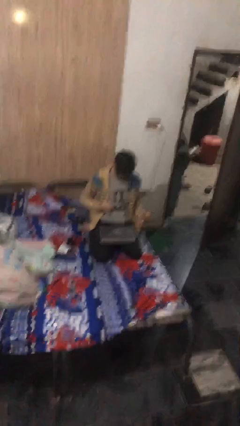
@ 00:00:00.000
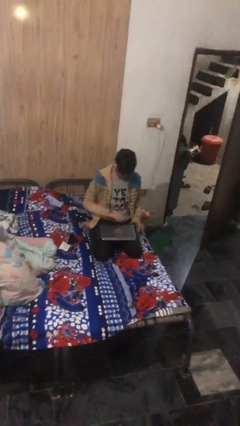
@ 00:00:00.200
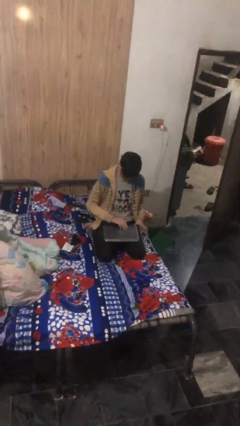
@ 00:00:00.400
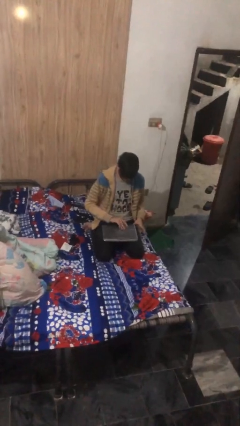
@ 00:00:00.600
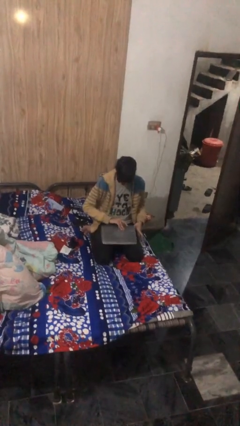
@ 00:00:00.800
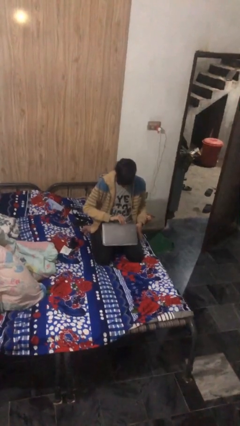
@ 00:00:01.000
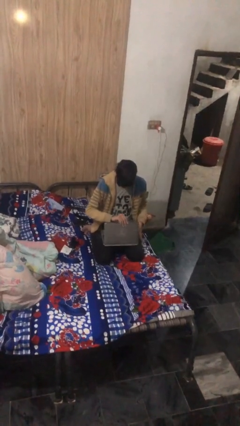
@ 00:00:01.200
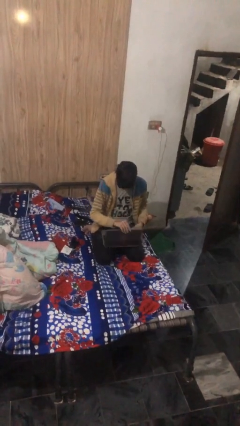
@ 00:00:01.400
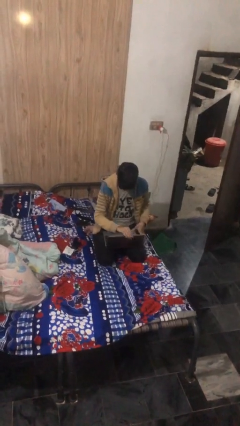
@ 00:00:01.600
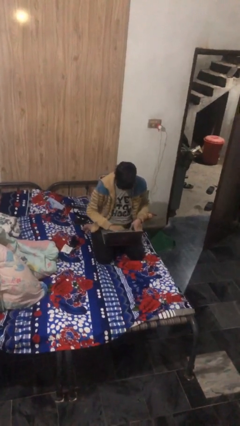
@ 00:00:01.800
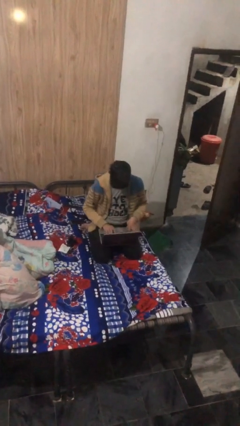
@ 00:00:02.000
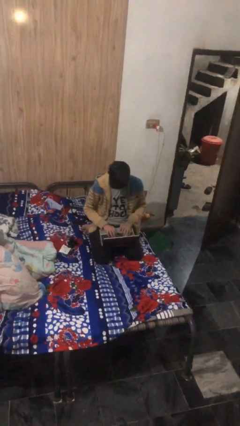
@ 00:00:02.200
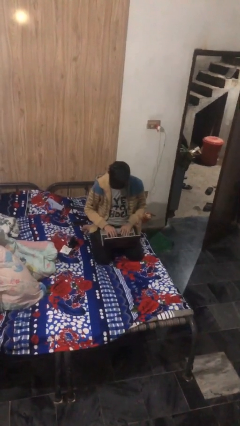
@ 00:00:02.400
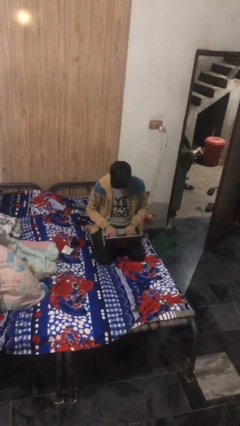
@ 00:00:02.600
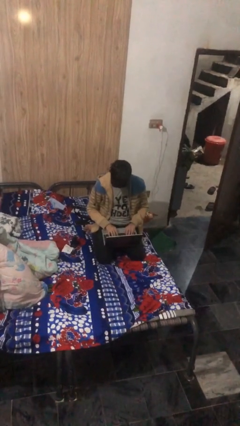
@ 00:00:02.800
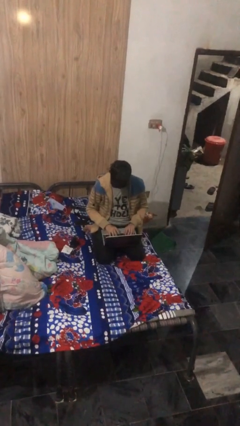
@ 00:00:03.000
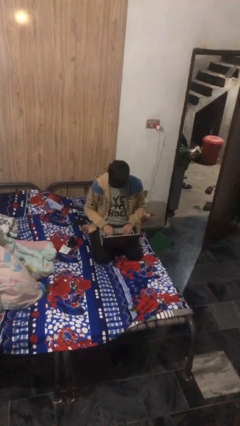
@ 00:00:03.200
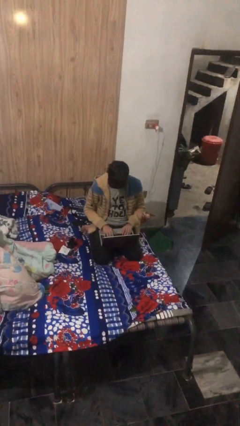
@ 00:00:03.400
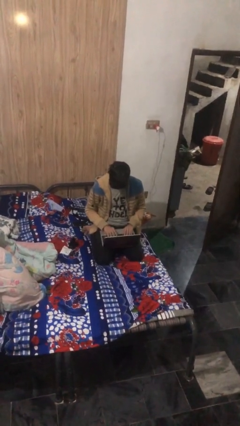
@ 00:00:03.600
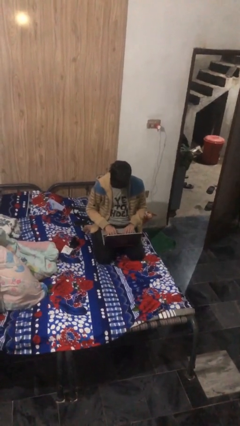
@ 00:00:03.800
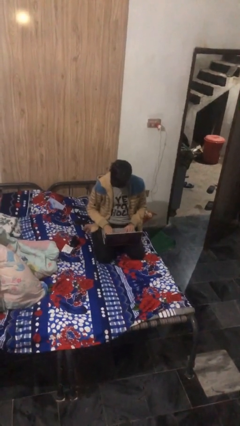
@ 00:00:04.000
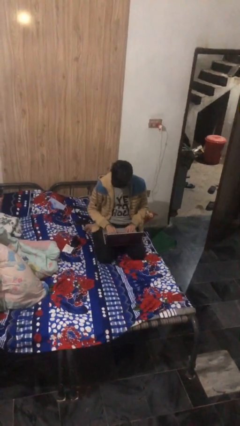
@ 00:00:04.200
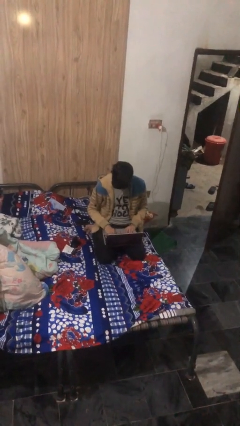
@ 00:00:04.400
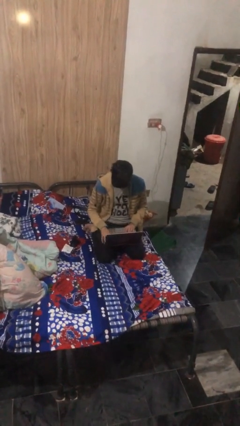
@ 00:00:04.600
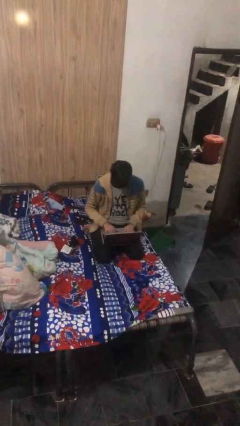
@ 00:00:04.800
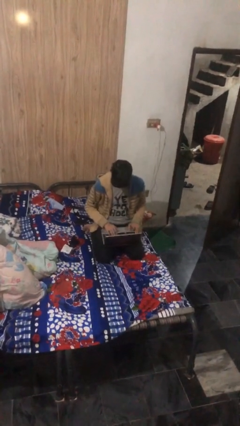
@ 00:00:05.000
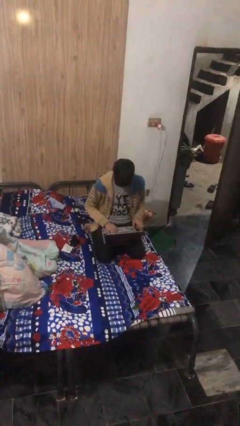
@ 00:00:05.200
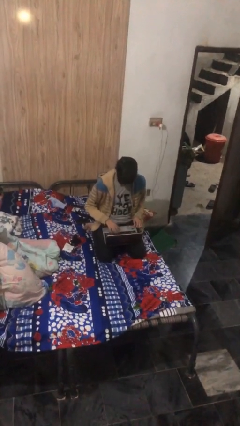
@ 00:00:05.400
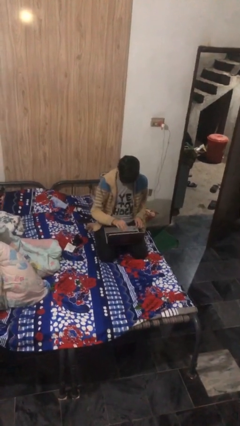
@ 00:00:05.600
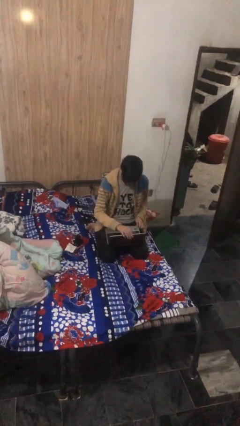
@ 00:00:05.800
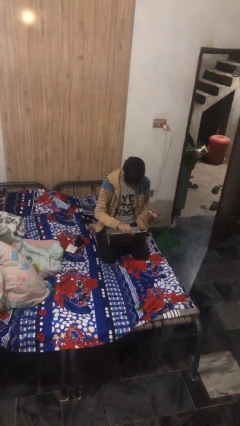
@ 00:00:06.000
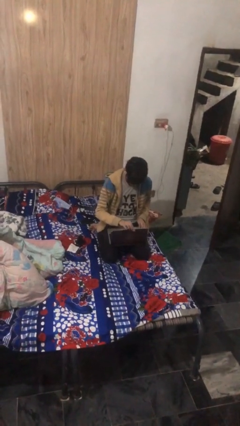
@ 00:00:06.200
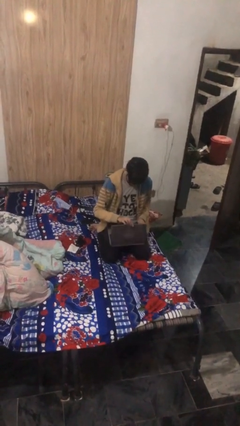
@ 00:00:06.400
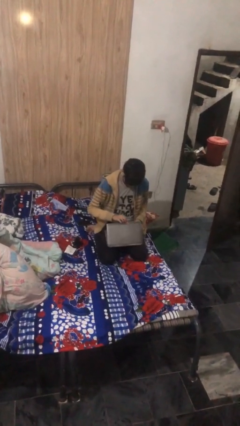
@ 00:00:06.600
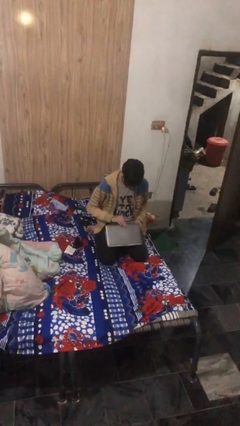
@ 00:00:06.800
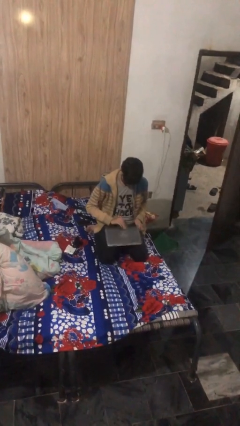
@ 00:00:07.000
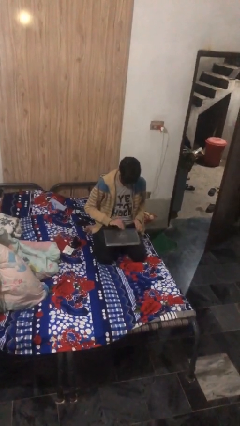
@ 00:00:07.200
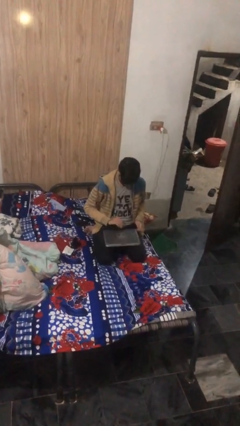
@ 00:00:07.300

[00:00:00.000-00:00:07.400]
person interacts with laptop

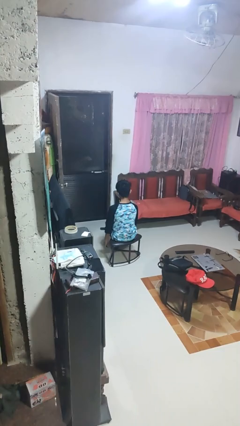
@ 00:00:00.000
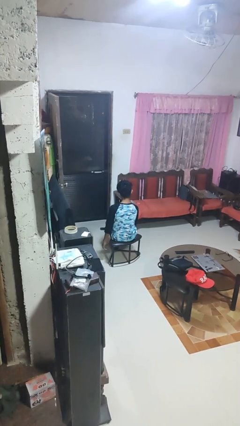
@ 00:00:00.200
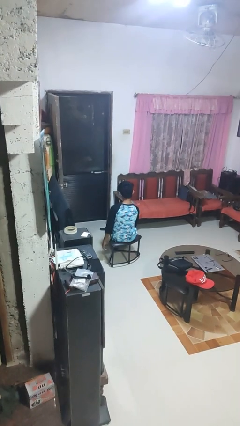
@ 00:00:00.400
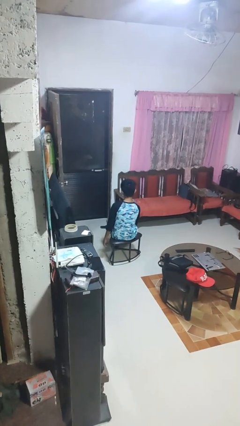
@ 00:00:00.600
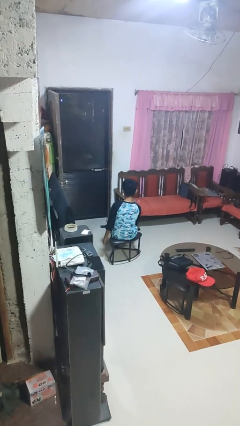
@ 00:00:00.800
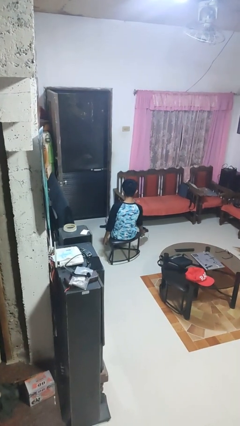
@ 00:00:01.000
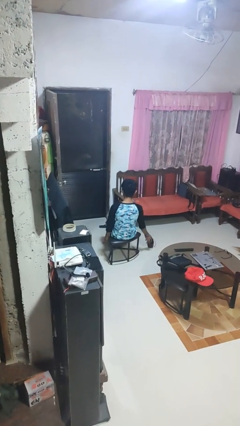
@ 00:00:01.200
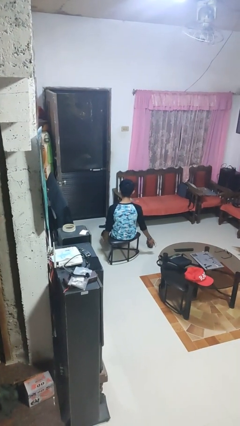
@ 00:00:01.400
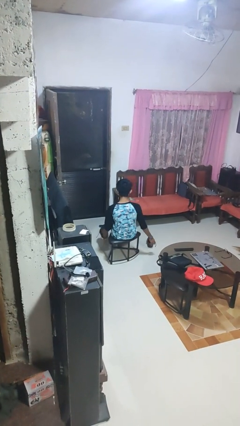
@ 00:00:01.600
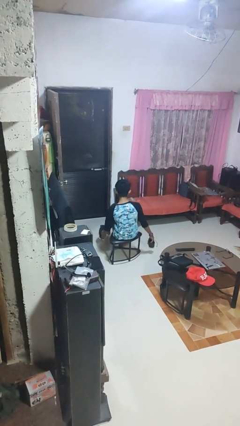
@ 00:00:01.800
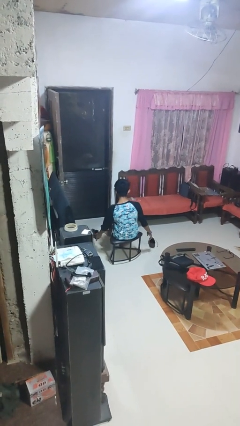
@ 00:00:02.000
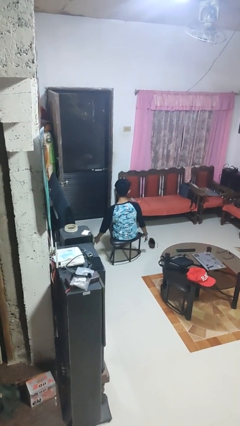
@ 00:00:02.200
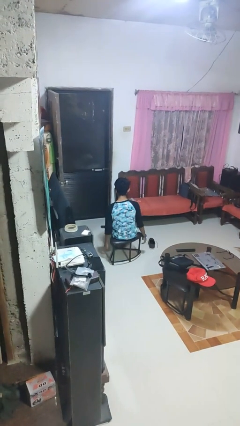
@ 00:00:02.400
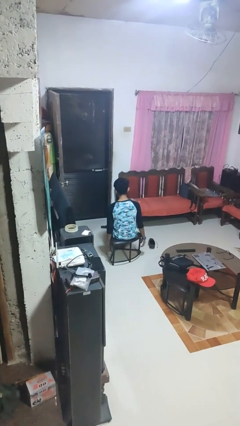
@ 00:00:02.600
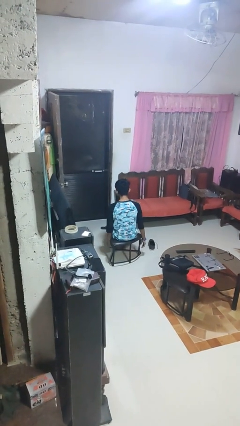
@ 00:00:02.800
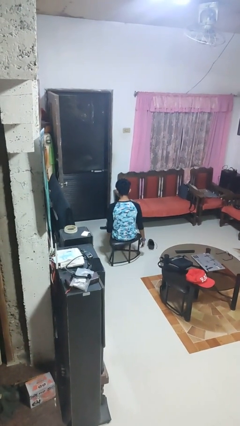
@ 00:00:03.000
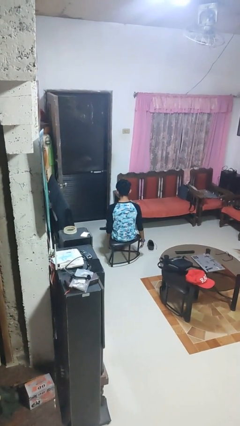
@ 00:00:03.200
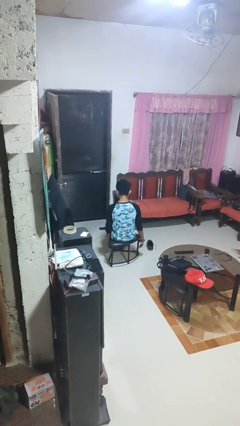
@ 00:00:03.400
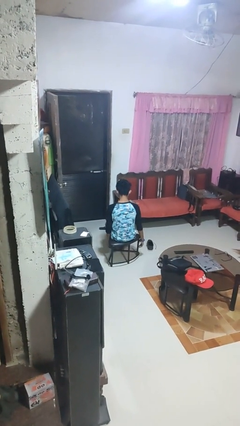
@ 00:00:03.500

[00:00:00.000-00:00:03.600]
person takes off shoes

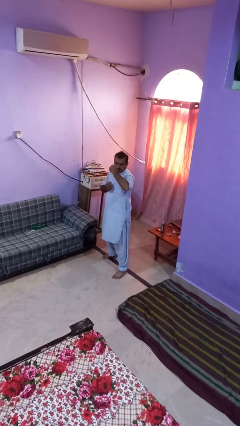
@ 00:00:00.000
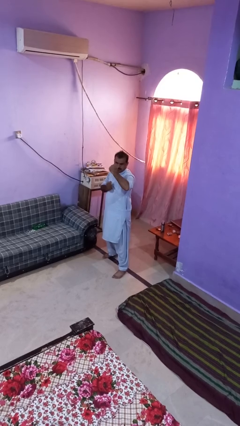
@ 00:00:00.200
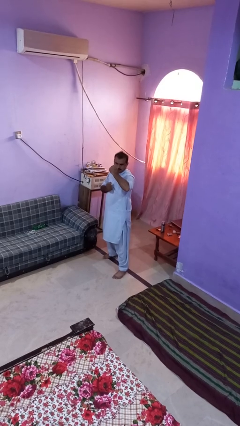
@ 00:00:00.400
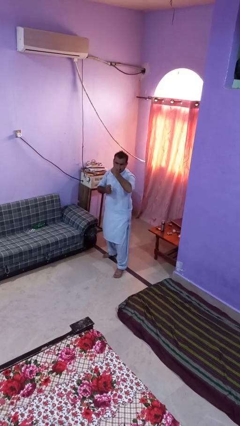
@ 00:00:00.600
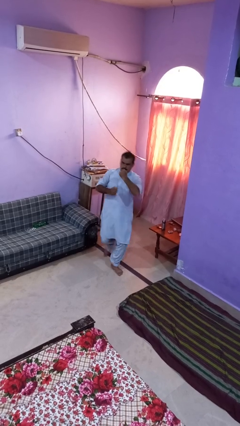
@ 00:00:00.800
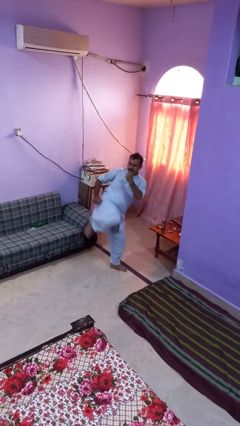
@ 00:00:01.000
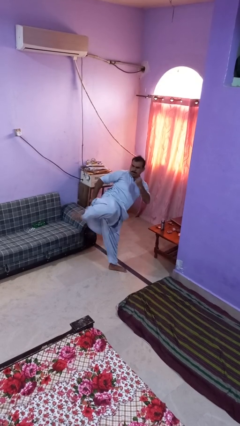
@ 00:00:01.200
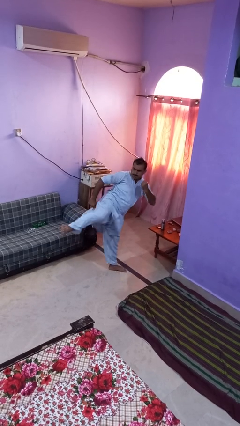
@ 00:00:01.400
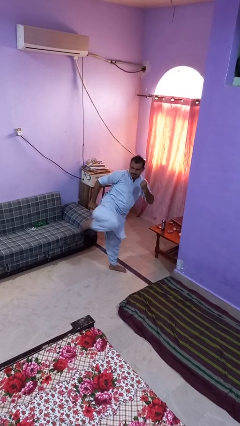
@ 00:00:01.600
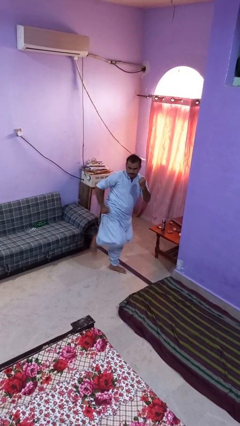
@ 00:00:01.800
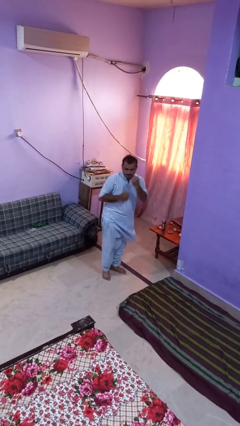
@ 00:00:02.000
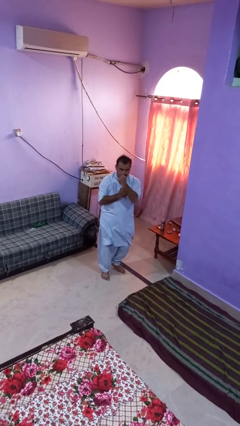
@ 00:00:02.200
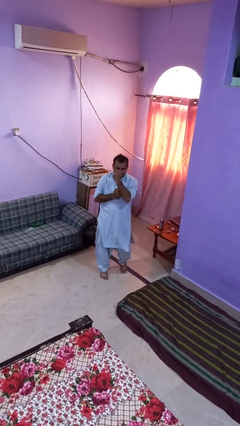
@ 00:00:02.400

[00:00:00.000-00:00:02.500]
person karate kicks

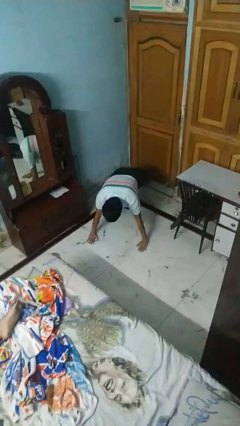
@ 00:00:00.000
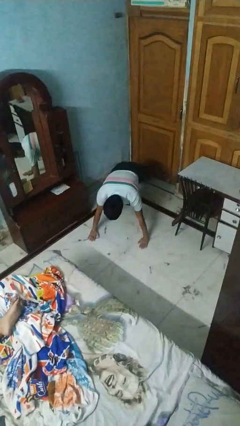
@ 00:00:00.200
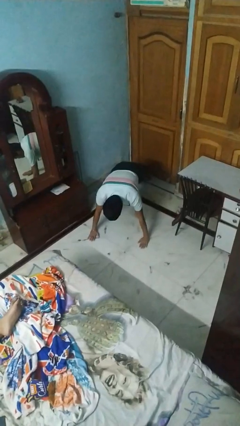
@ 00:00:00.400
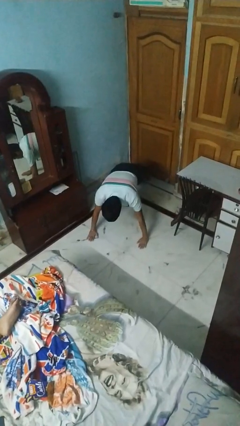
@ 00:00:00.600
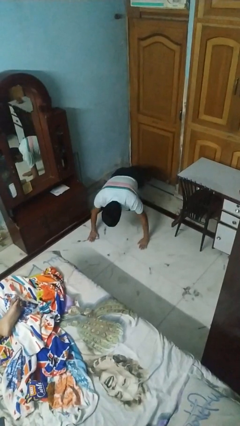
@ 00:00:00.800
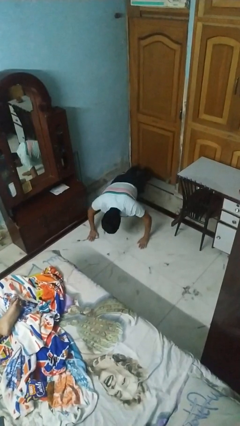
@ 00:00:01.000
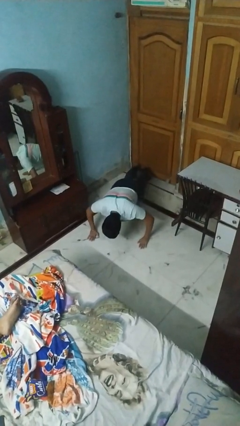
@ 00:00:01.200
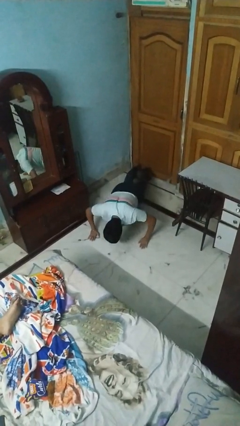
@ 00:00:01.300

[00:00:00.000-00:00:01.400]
person exercises with pushup

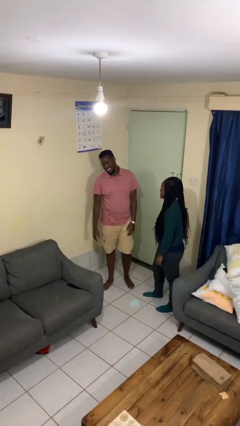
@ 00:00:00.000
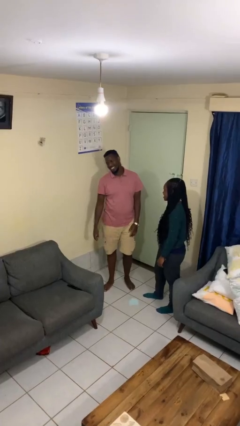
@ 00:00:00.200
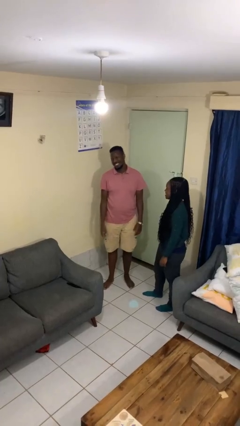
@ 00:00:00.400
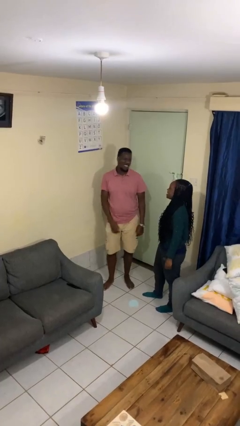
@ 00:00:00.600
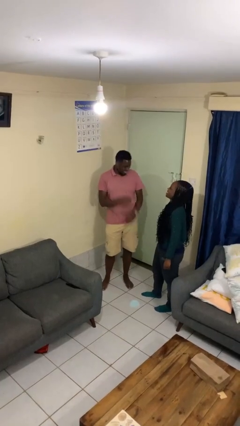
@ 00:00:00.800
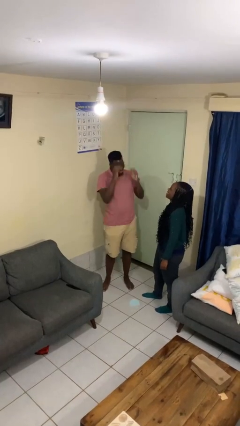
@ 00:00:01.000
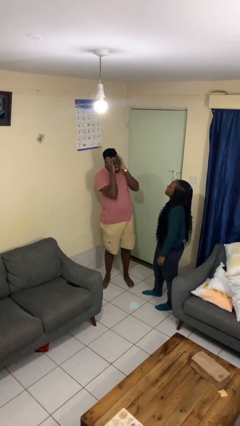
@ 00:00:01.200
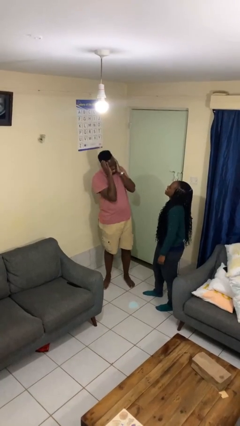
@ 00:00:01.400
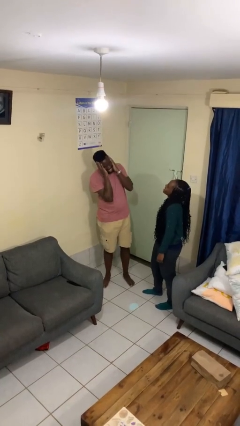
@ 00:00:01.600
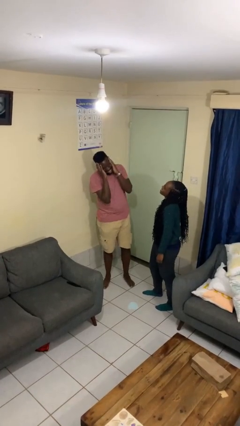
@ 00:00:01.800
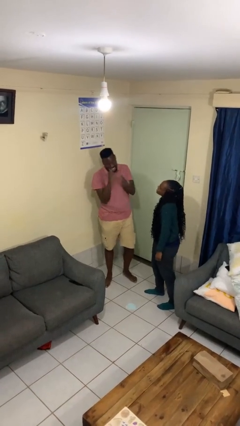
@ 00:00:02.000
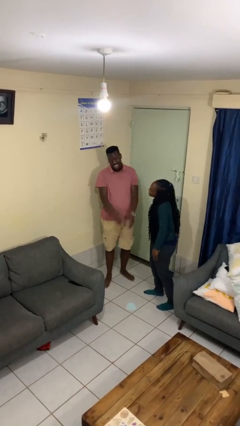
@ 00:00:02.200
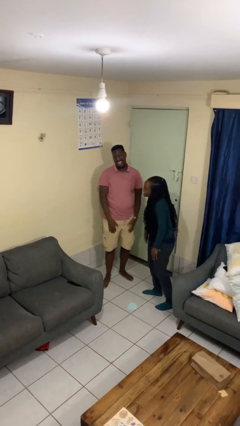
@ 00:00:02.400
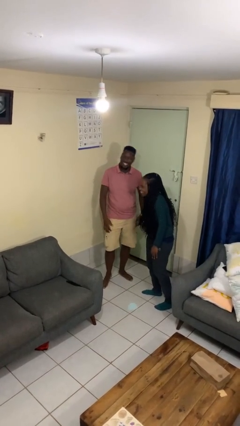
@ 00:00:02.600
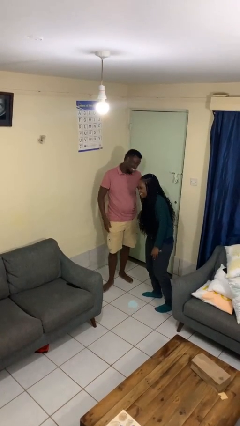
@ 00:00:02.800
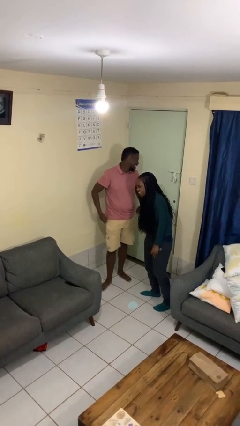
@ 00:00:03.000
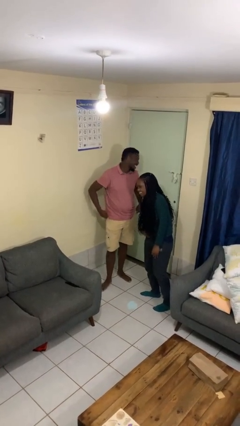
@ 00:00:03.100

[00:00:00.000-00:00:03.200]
person laughs with person
